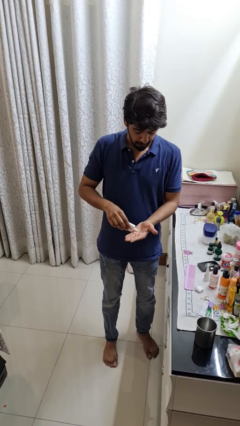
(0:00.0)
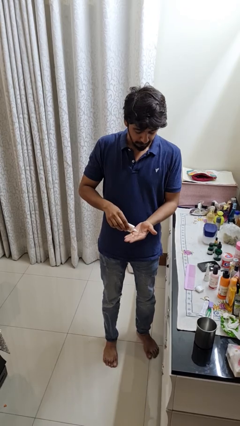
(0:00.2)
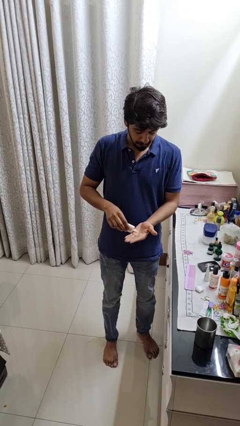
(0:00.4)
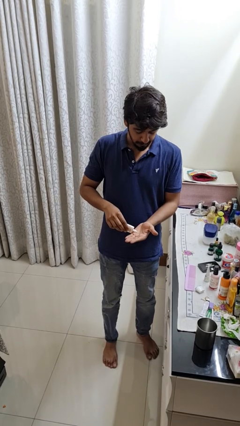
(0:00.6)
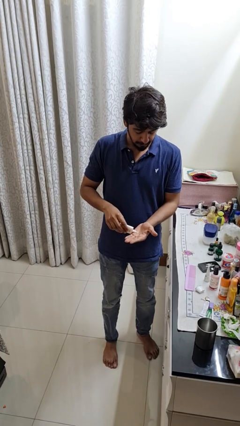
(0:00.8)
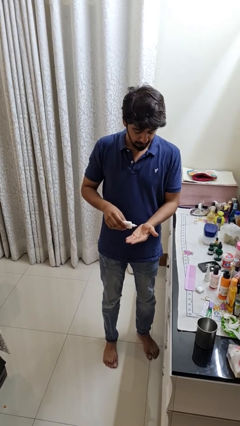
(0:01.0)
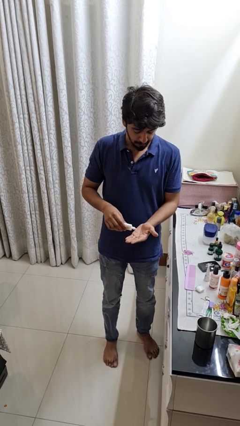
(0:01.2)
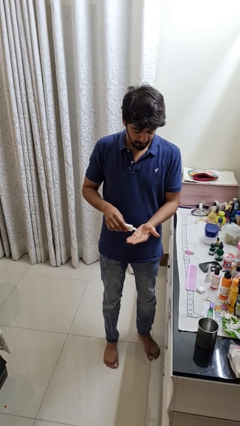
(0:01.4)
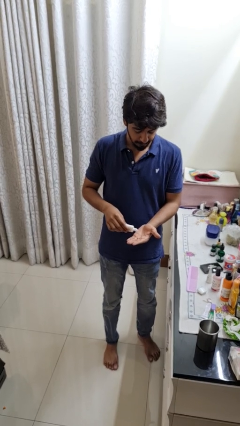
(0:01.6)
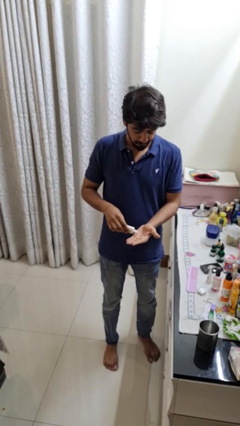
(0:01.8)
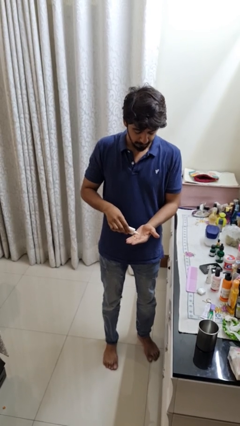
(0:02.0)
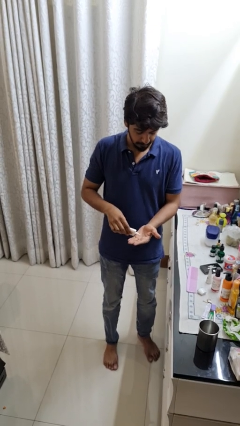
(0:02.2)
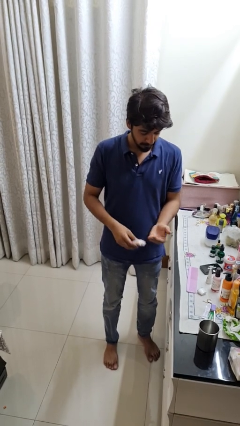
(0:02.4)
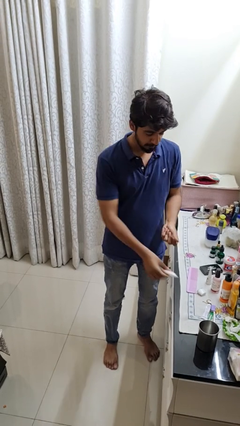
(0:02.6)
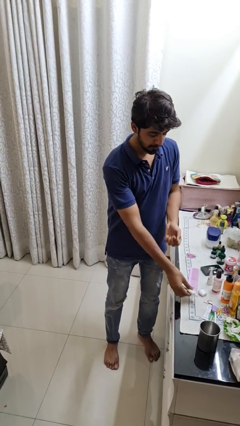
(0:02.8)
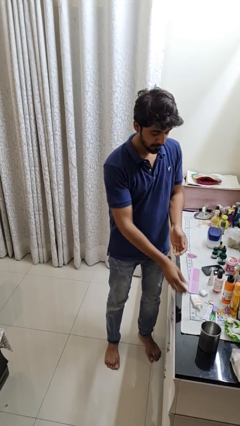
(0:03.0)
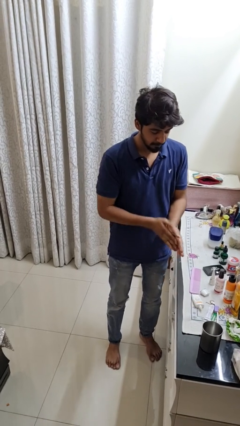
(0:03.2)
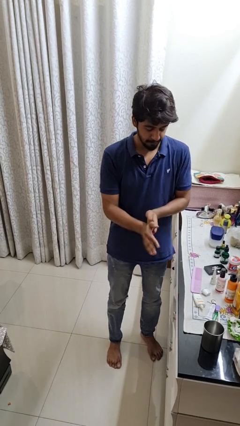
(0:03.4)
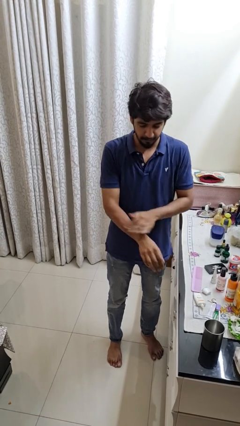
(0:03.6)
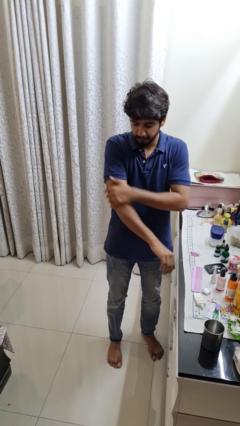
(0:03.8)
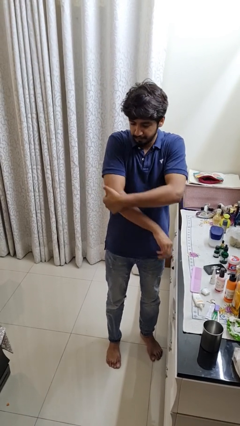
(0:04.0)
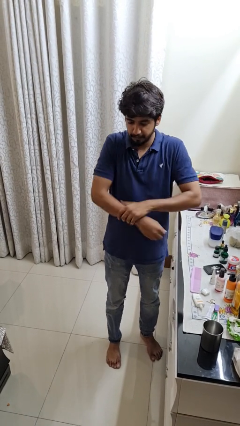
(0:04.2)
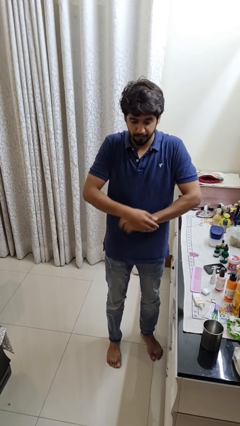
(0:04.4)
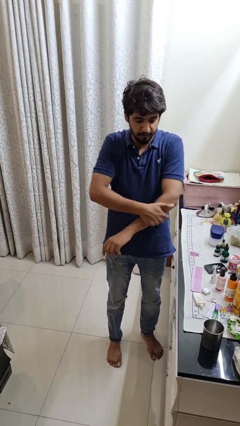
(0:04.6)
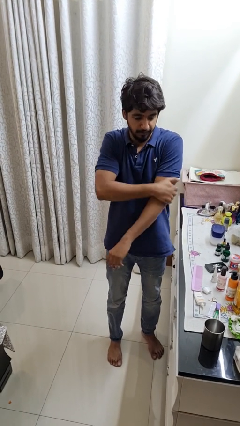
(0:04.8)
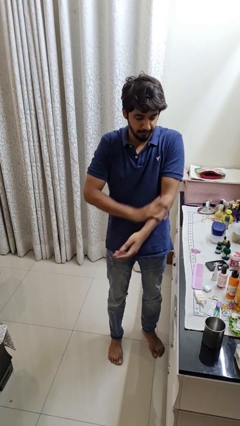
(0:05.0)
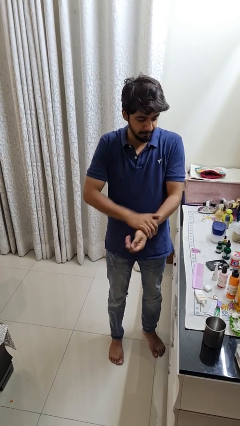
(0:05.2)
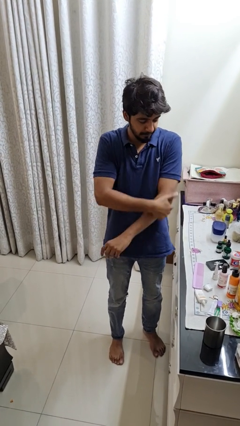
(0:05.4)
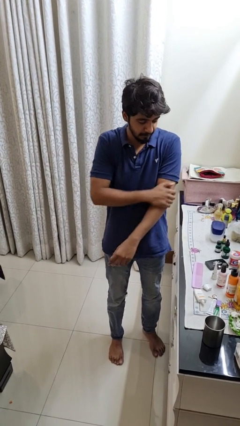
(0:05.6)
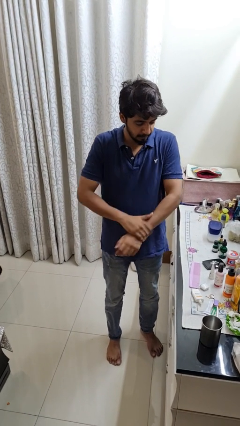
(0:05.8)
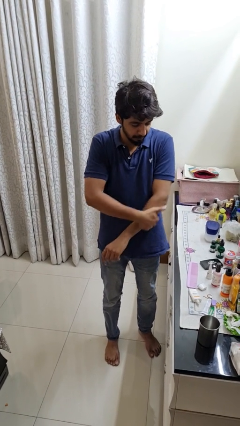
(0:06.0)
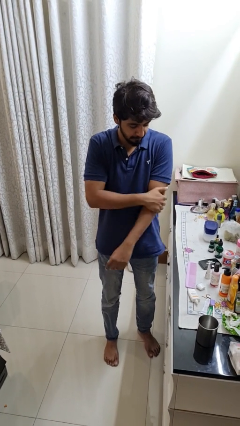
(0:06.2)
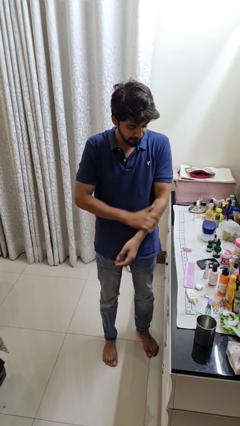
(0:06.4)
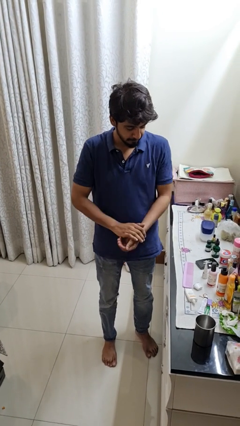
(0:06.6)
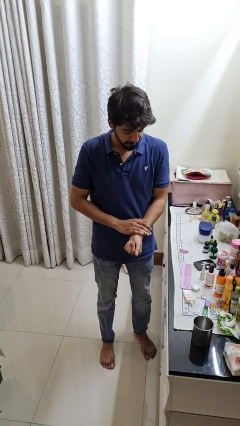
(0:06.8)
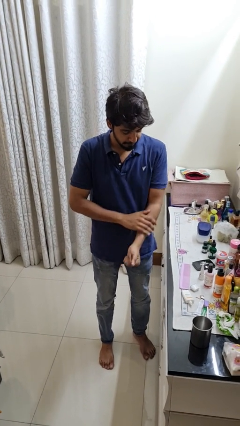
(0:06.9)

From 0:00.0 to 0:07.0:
person applies sunscreen

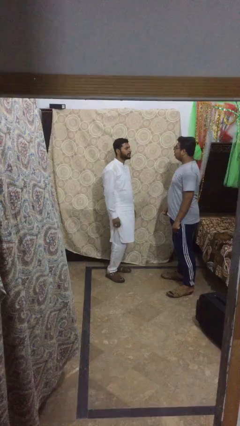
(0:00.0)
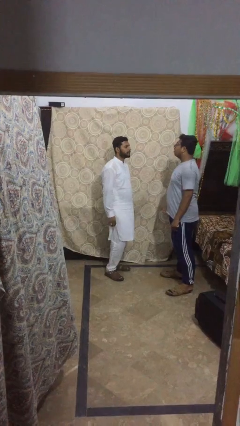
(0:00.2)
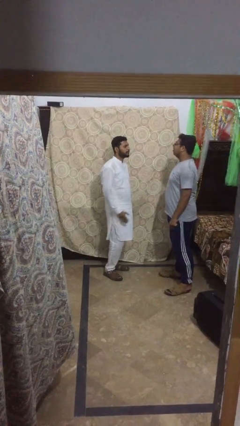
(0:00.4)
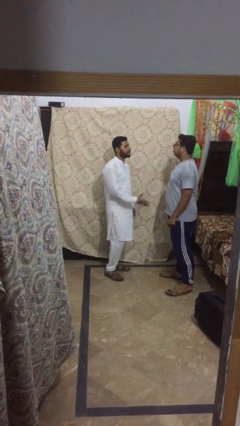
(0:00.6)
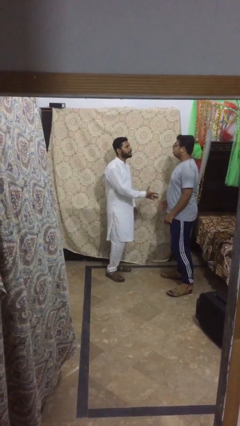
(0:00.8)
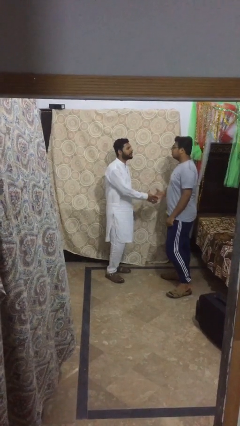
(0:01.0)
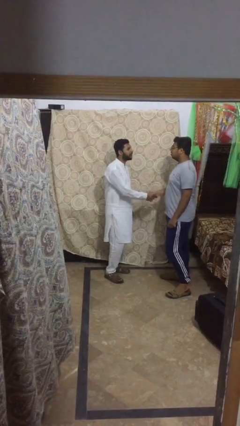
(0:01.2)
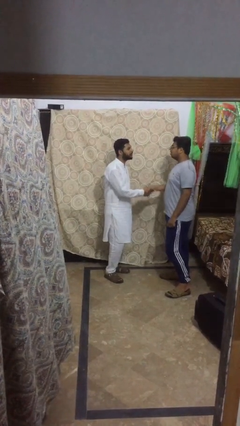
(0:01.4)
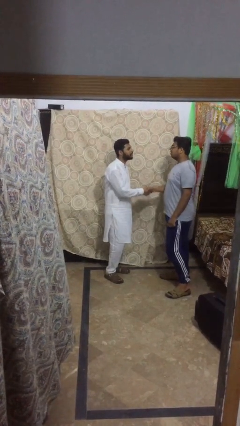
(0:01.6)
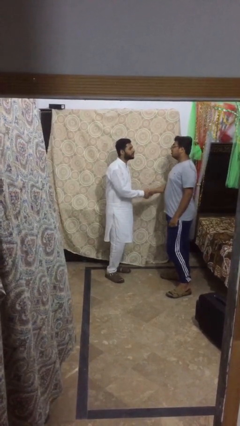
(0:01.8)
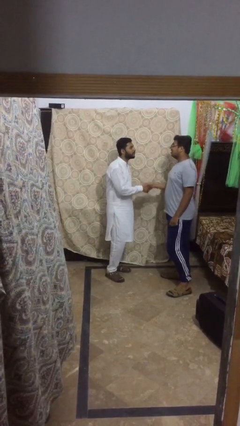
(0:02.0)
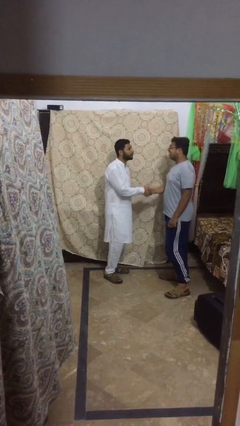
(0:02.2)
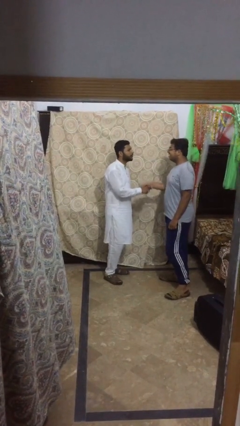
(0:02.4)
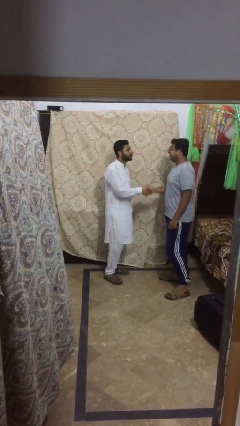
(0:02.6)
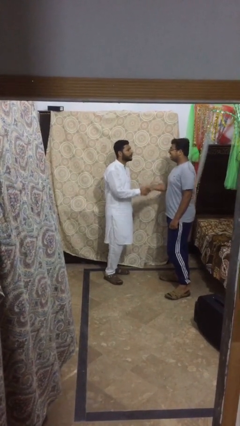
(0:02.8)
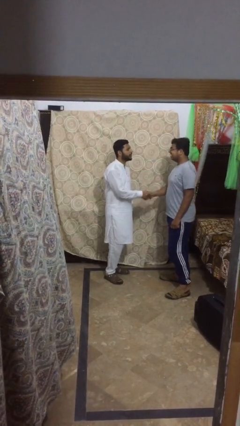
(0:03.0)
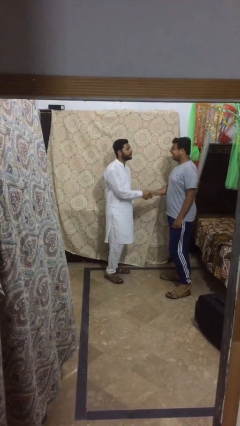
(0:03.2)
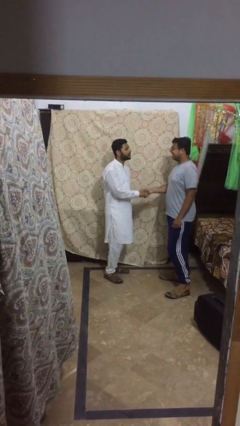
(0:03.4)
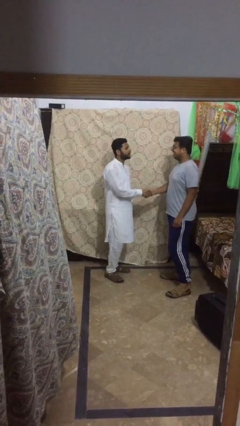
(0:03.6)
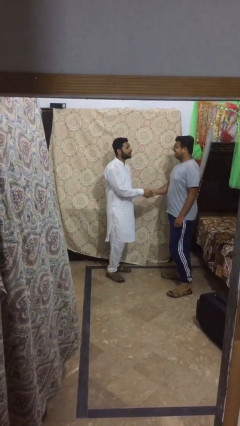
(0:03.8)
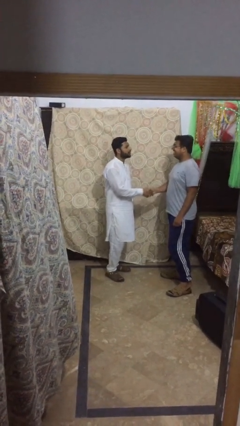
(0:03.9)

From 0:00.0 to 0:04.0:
person shakes hand

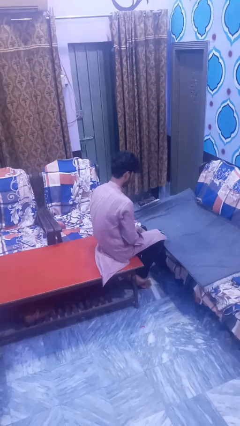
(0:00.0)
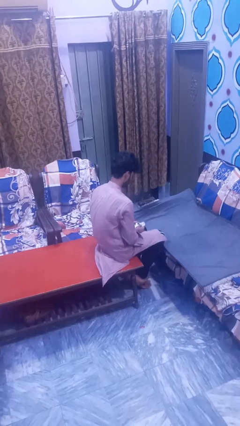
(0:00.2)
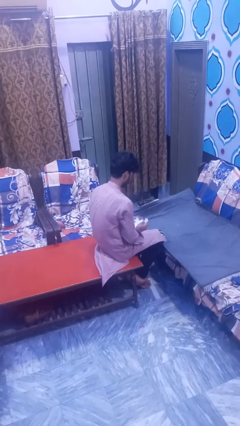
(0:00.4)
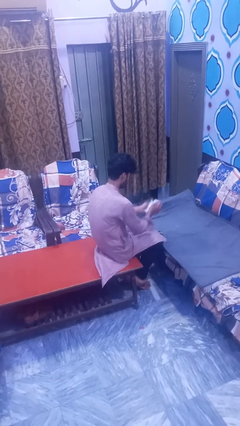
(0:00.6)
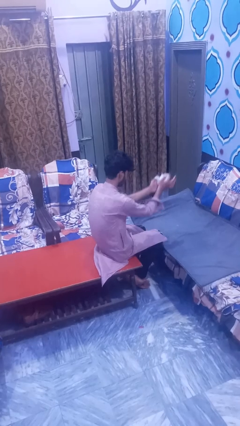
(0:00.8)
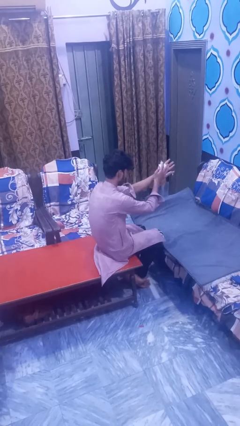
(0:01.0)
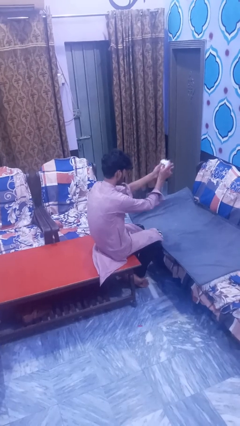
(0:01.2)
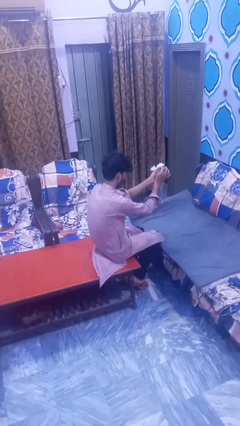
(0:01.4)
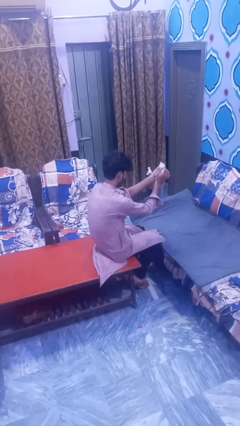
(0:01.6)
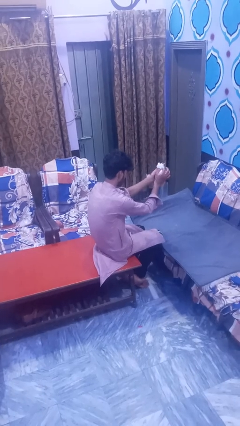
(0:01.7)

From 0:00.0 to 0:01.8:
person crumples paper

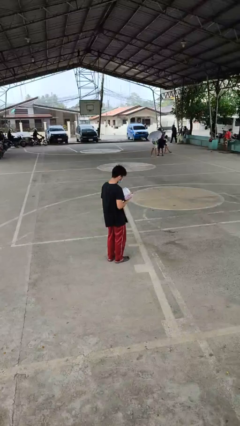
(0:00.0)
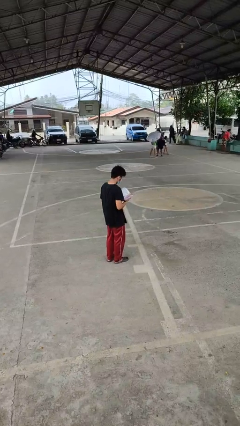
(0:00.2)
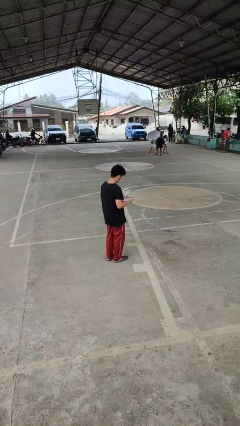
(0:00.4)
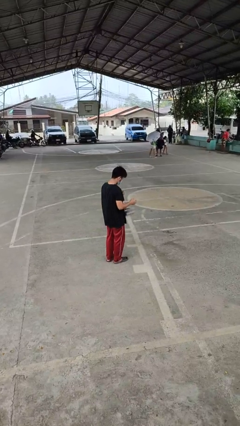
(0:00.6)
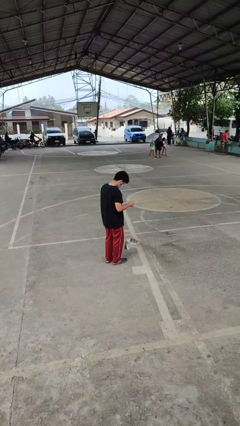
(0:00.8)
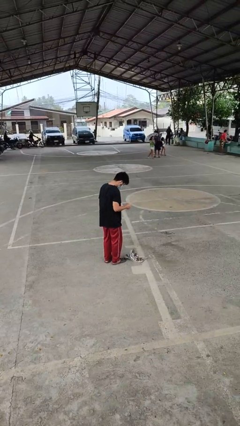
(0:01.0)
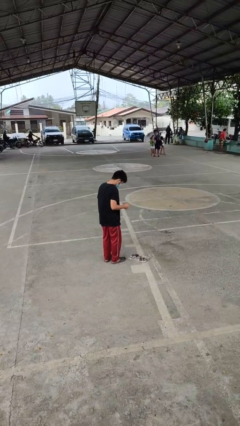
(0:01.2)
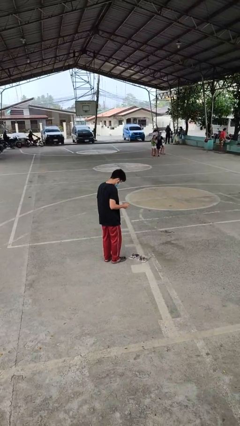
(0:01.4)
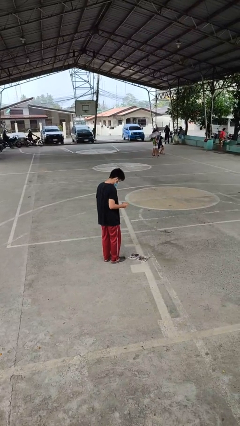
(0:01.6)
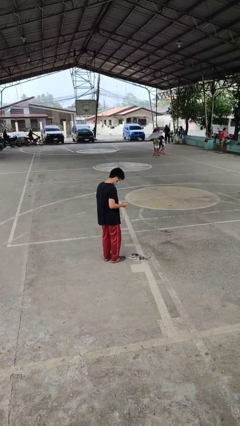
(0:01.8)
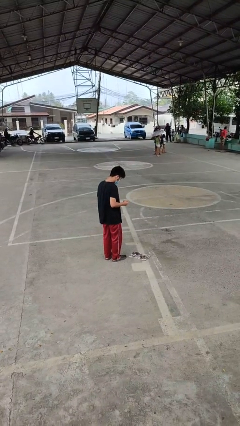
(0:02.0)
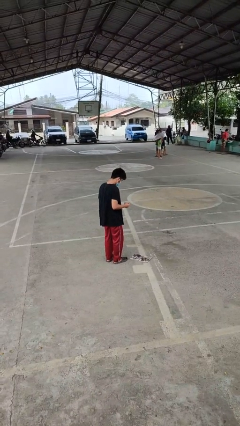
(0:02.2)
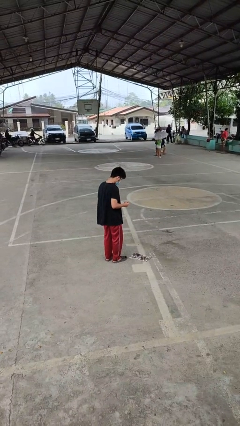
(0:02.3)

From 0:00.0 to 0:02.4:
person drops object

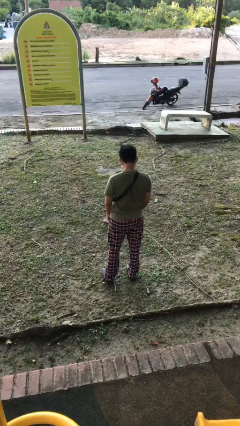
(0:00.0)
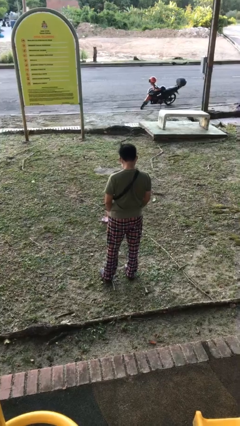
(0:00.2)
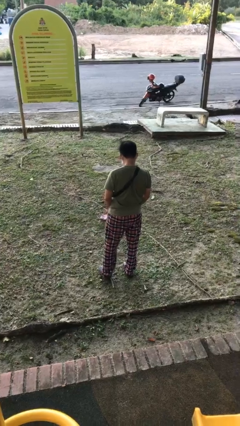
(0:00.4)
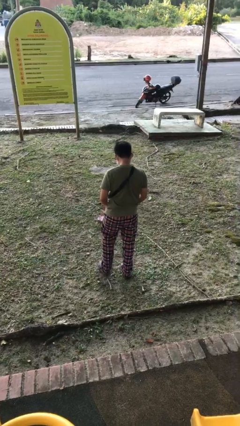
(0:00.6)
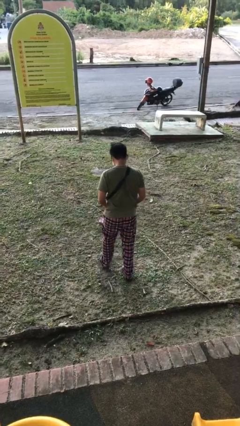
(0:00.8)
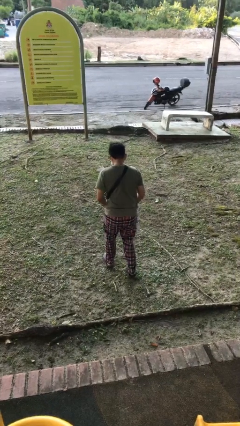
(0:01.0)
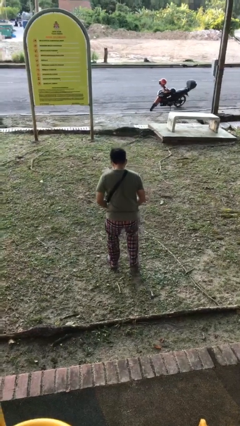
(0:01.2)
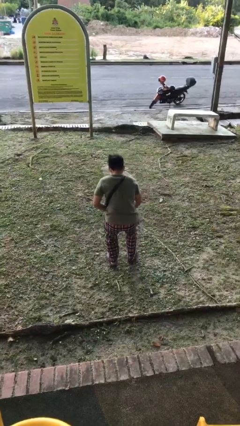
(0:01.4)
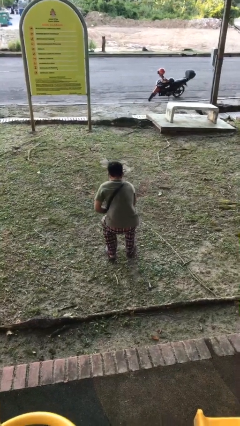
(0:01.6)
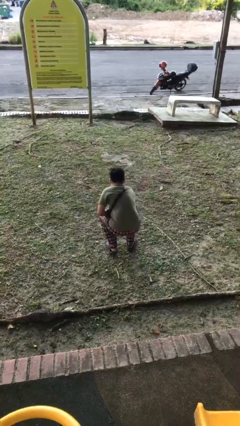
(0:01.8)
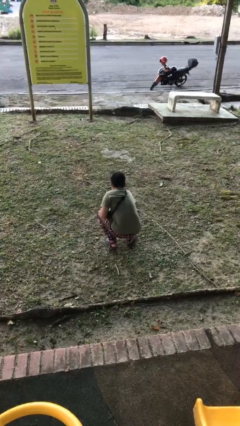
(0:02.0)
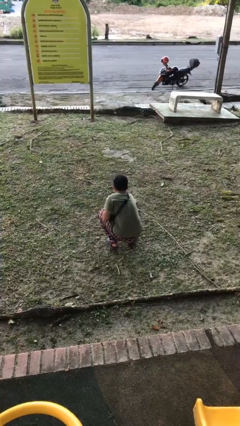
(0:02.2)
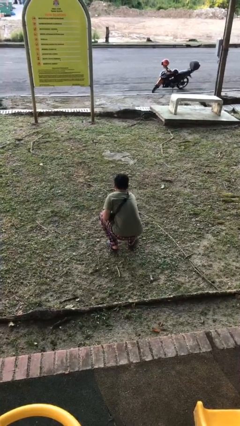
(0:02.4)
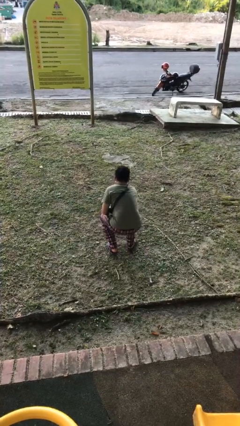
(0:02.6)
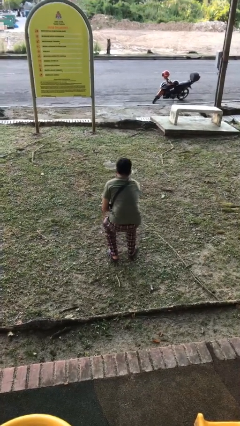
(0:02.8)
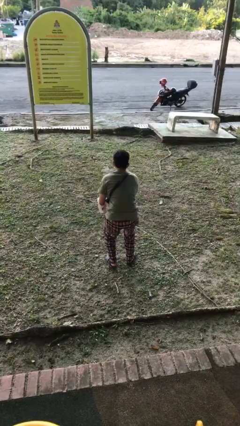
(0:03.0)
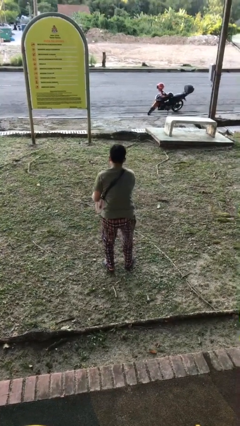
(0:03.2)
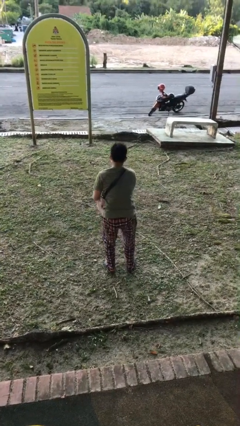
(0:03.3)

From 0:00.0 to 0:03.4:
person picks up object from floor
